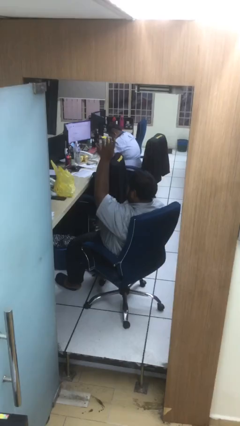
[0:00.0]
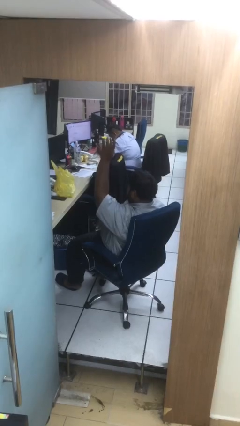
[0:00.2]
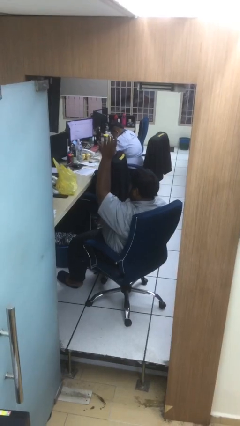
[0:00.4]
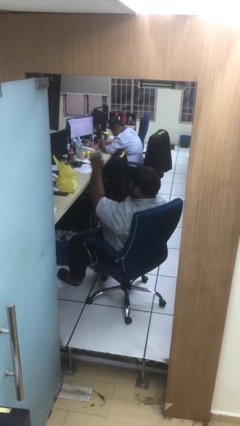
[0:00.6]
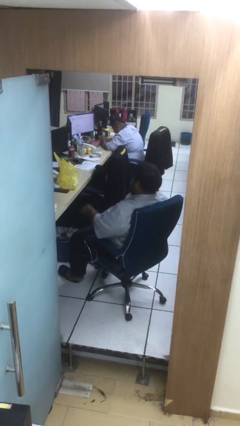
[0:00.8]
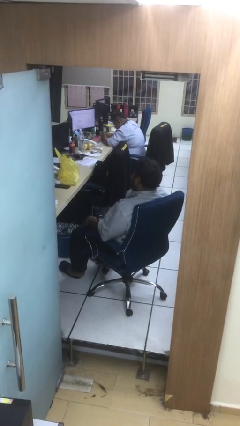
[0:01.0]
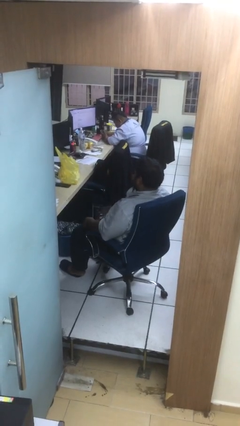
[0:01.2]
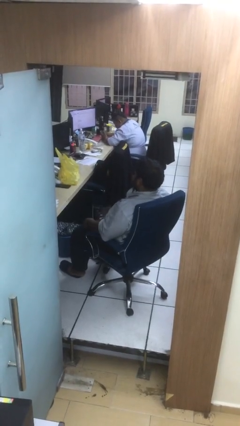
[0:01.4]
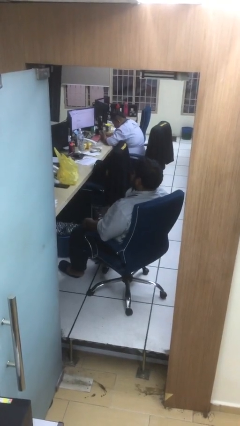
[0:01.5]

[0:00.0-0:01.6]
person gestures lower hand

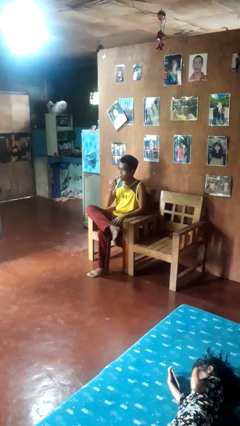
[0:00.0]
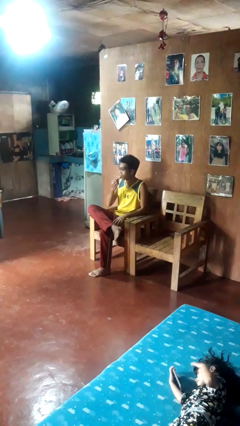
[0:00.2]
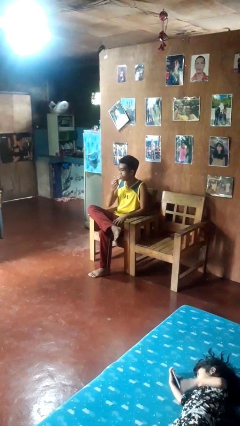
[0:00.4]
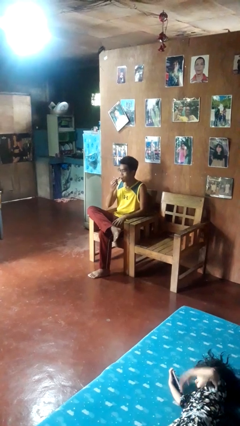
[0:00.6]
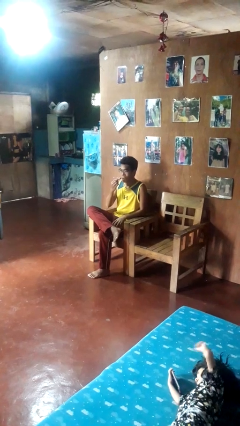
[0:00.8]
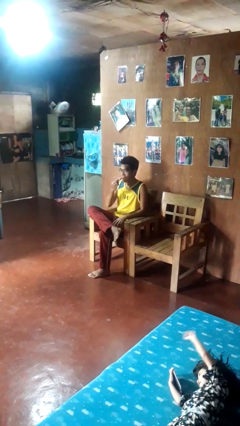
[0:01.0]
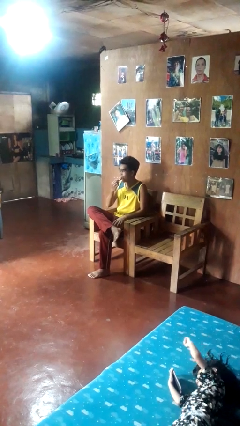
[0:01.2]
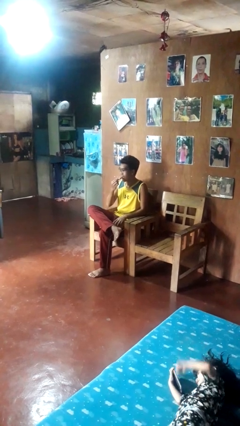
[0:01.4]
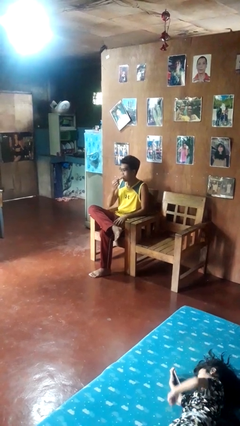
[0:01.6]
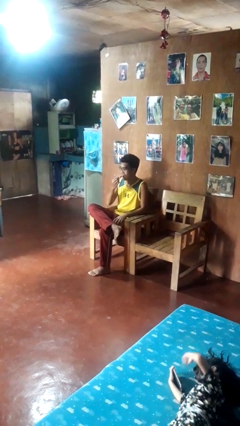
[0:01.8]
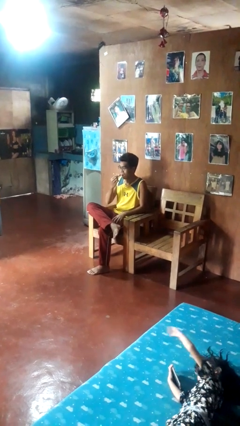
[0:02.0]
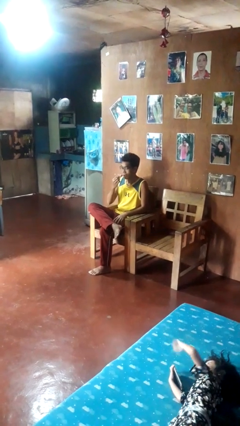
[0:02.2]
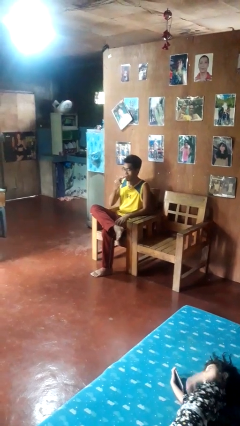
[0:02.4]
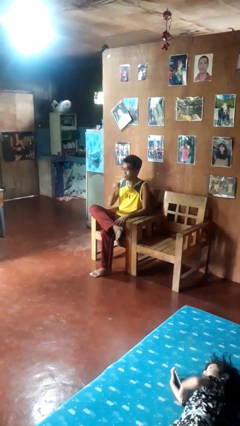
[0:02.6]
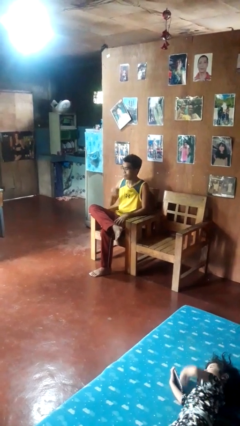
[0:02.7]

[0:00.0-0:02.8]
person applies lip makeup

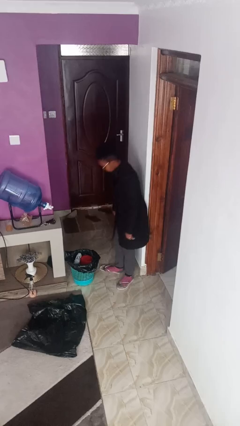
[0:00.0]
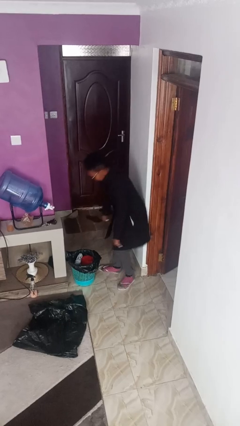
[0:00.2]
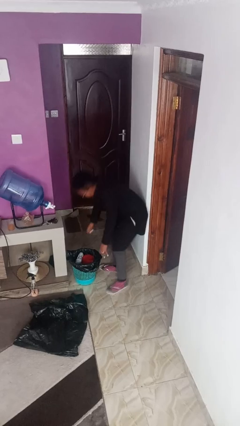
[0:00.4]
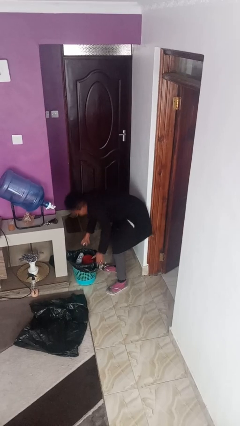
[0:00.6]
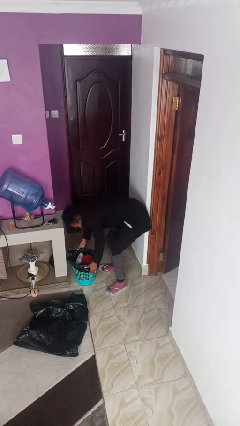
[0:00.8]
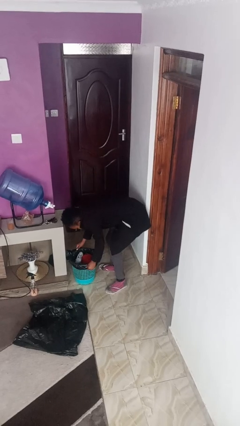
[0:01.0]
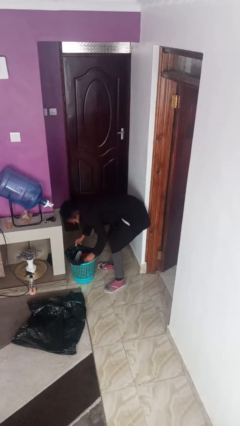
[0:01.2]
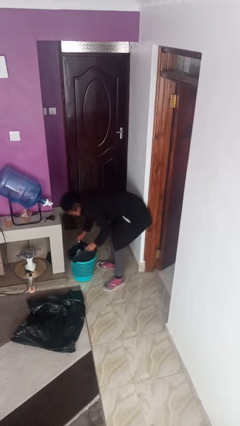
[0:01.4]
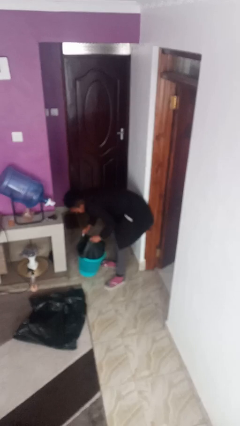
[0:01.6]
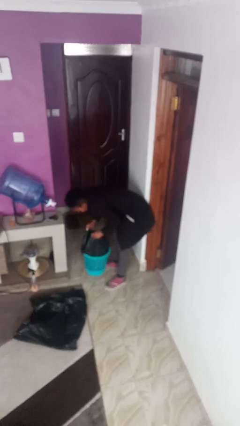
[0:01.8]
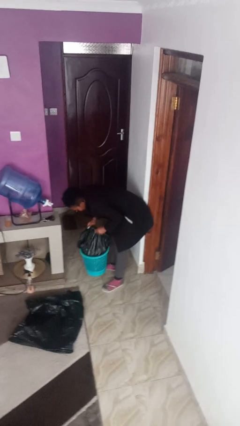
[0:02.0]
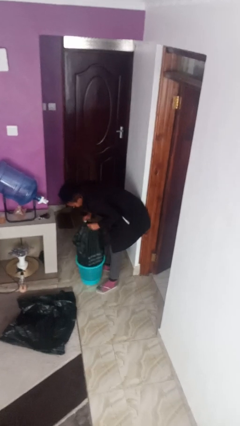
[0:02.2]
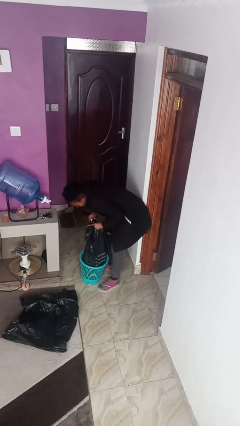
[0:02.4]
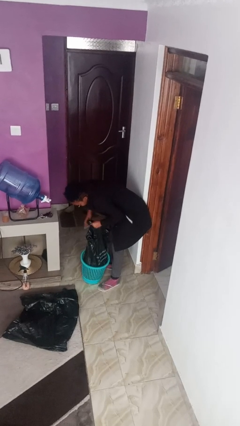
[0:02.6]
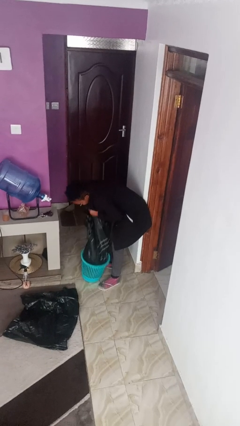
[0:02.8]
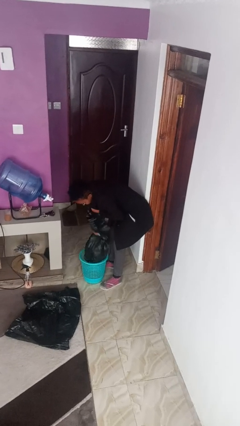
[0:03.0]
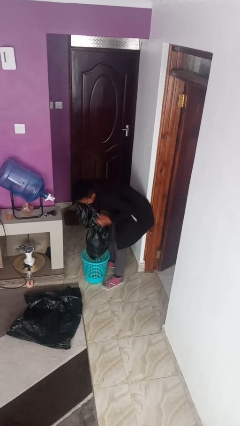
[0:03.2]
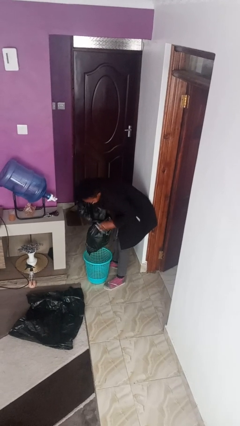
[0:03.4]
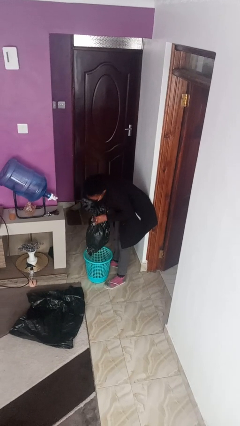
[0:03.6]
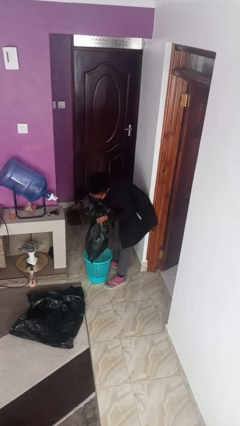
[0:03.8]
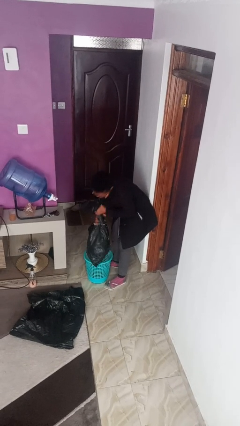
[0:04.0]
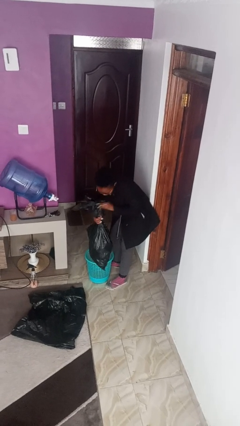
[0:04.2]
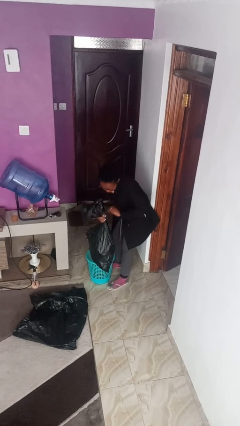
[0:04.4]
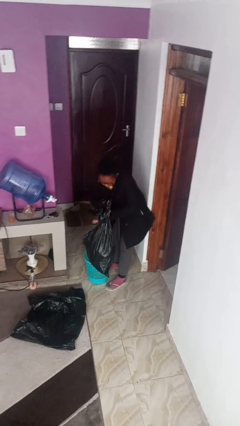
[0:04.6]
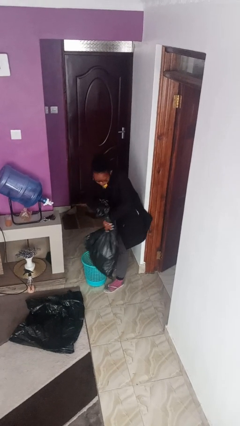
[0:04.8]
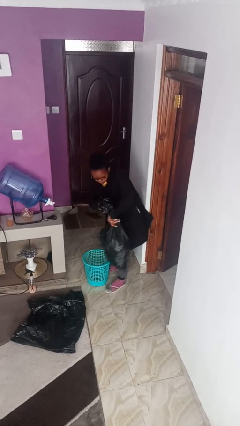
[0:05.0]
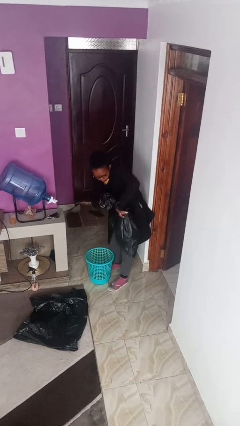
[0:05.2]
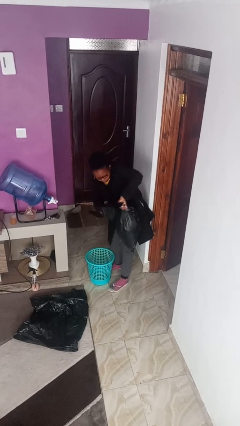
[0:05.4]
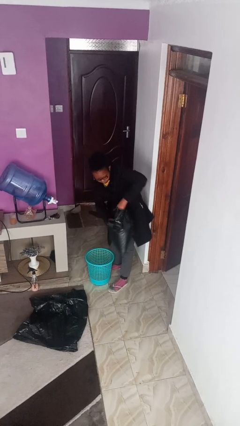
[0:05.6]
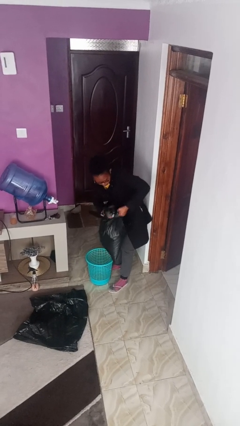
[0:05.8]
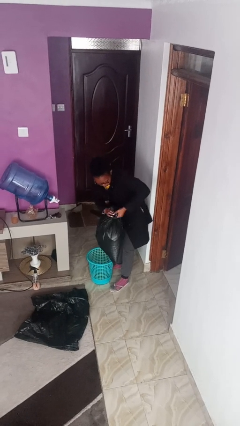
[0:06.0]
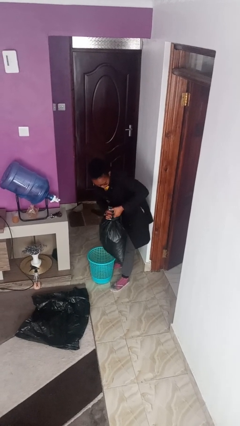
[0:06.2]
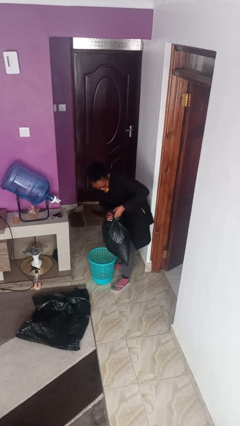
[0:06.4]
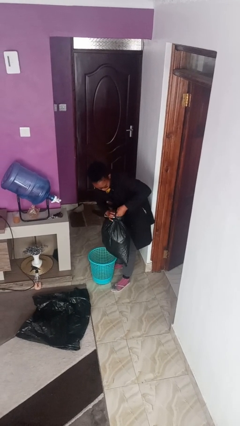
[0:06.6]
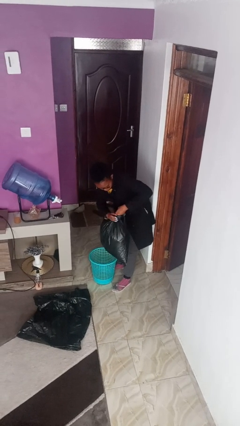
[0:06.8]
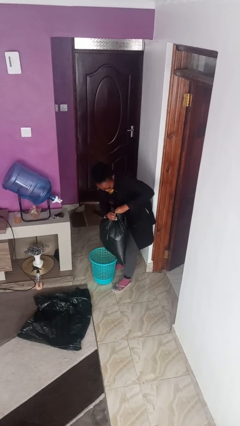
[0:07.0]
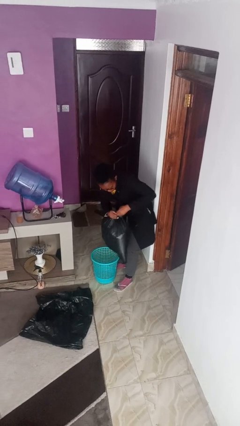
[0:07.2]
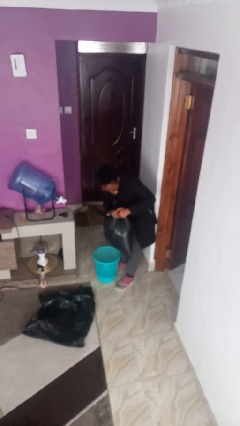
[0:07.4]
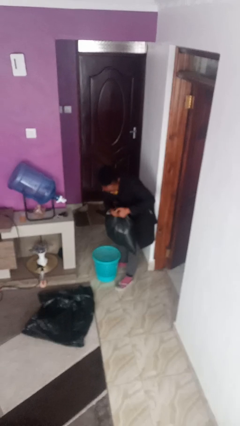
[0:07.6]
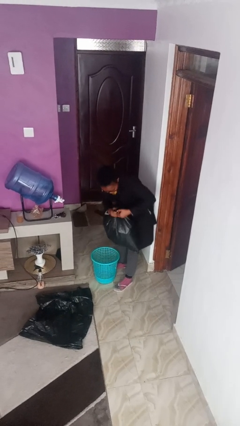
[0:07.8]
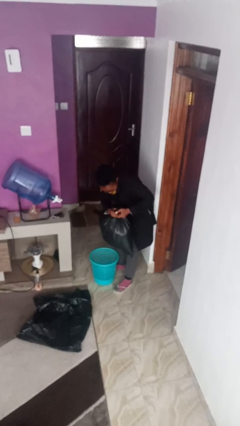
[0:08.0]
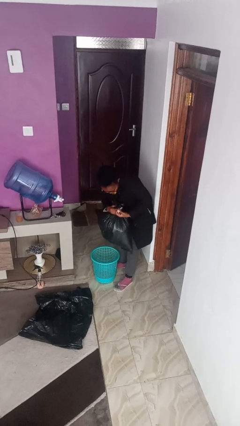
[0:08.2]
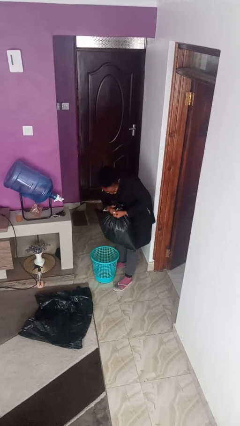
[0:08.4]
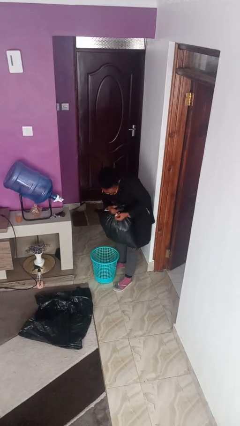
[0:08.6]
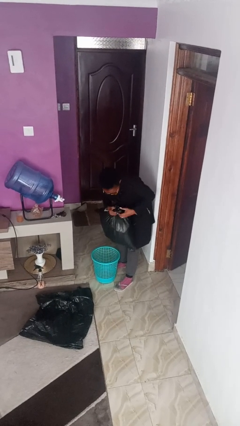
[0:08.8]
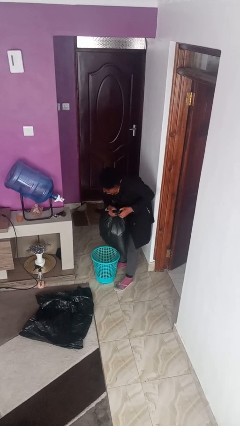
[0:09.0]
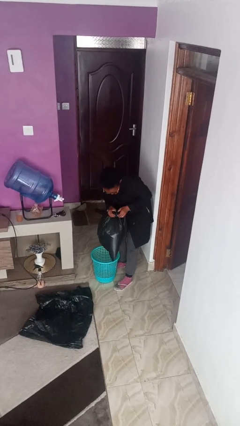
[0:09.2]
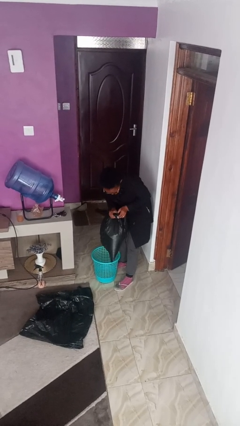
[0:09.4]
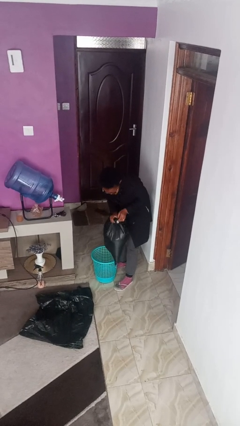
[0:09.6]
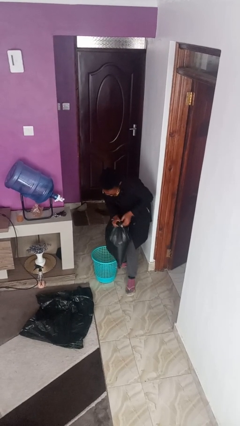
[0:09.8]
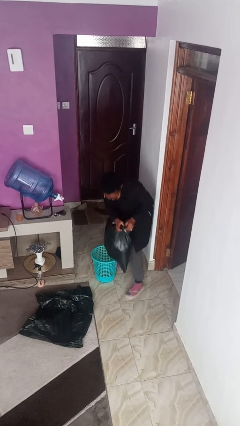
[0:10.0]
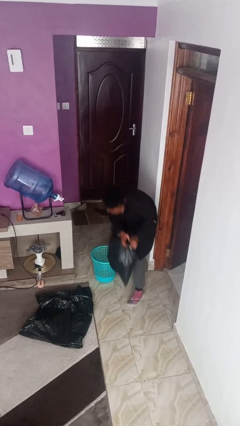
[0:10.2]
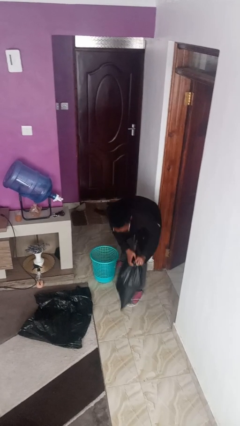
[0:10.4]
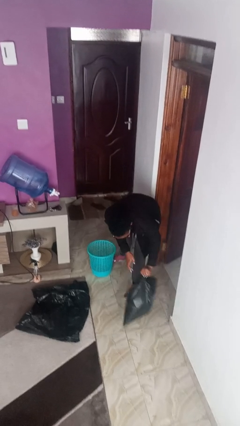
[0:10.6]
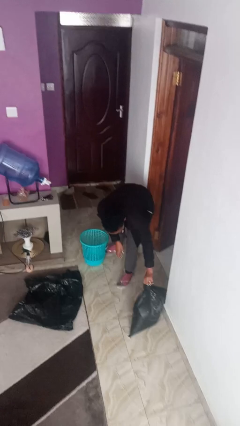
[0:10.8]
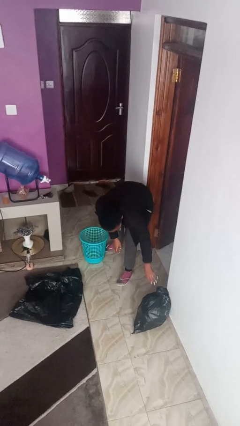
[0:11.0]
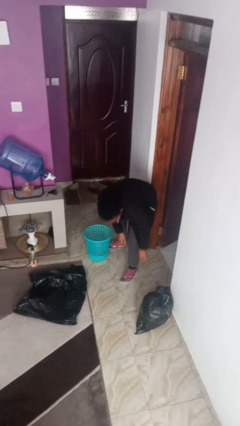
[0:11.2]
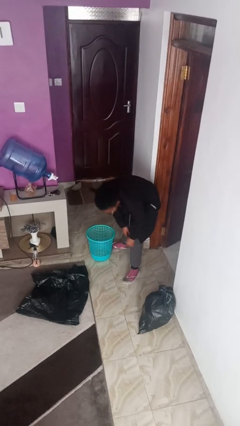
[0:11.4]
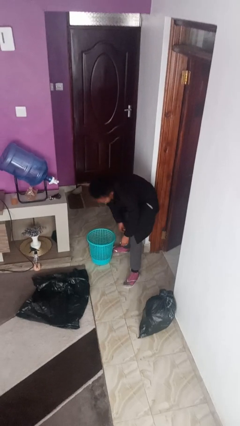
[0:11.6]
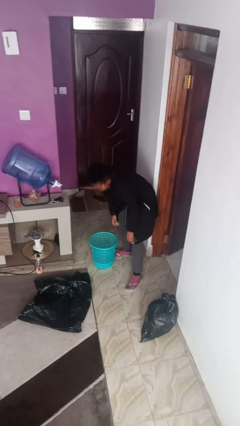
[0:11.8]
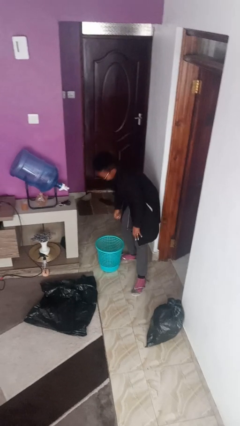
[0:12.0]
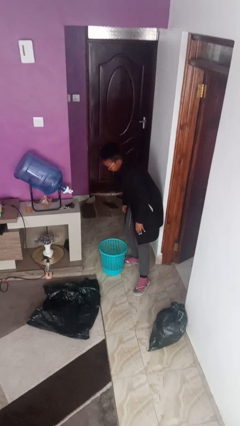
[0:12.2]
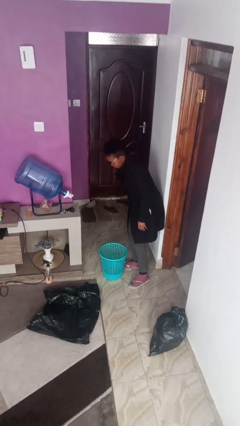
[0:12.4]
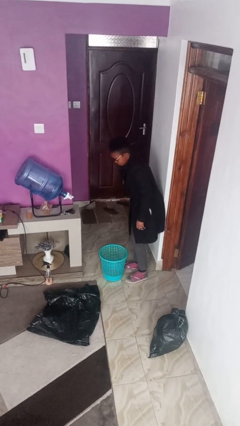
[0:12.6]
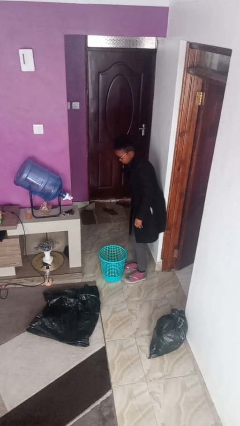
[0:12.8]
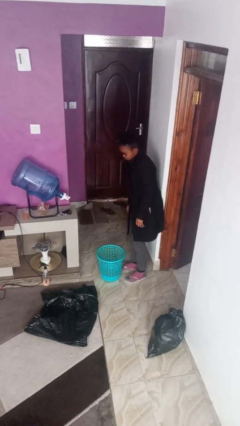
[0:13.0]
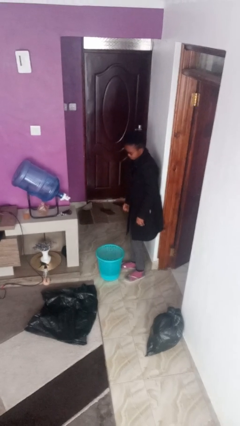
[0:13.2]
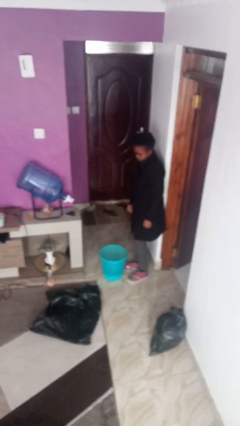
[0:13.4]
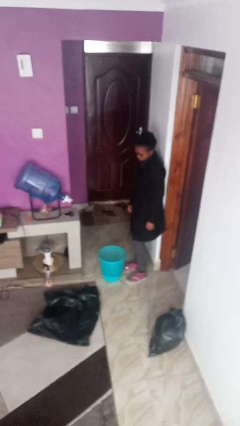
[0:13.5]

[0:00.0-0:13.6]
person removes trashbag from trashcan
